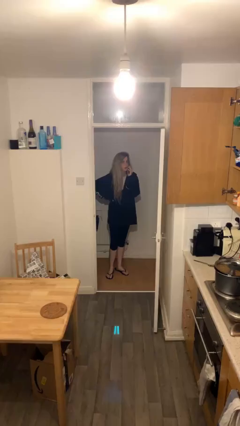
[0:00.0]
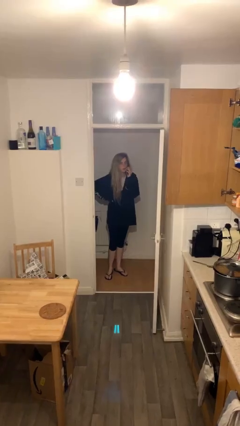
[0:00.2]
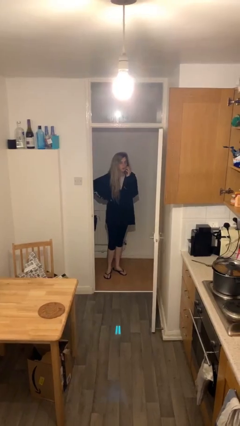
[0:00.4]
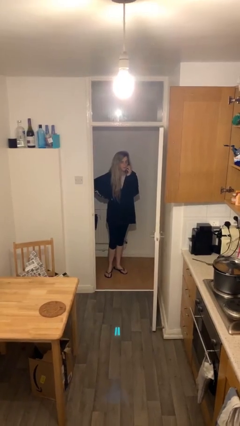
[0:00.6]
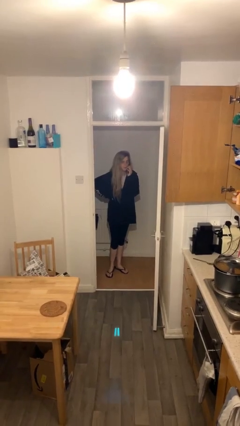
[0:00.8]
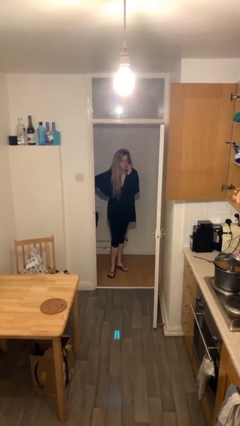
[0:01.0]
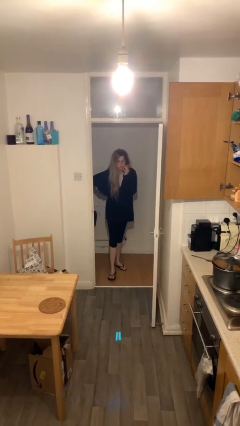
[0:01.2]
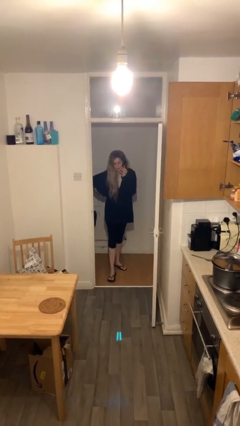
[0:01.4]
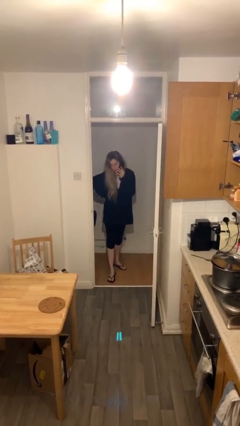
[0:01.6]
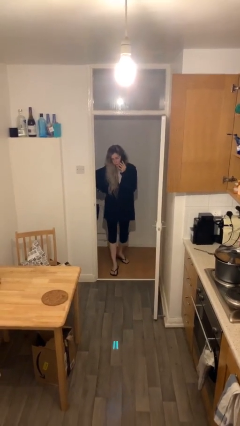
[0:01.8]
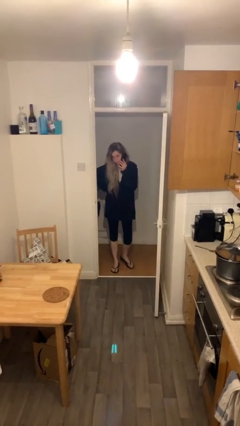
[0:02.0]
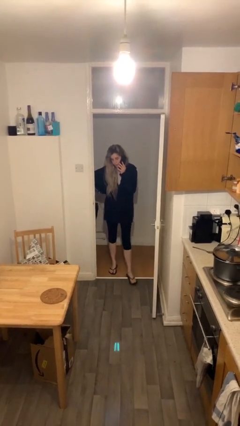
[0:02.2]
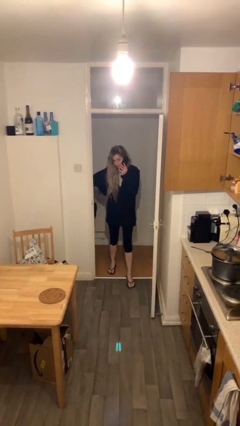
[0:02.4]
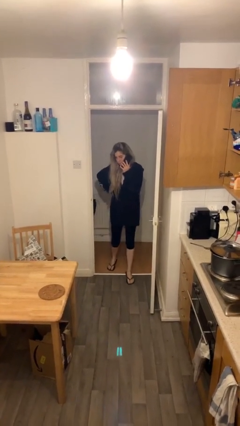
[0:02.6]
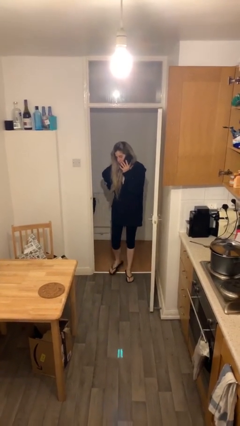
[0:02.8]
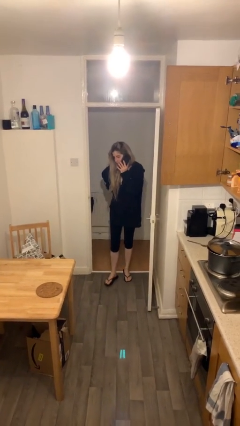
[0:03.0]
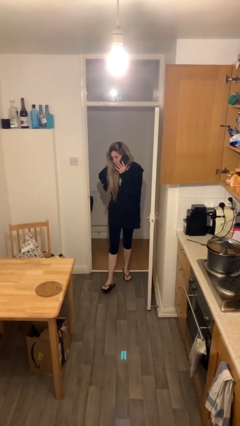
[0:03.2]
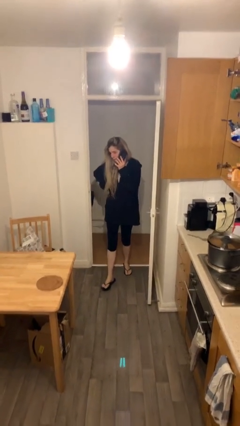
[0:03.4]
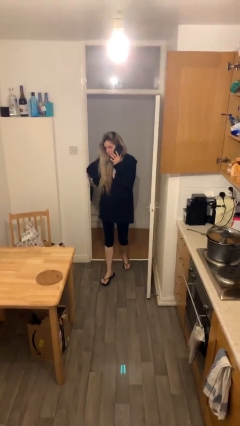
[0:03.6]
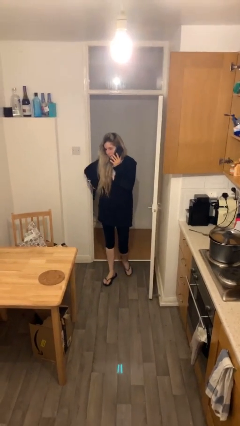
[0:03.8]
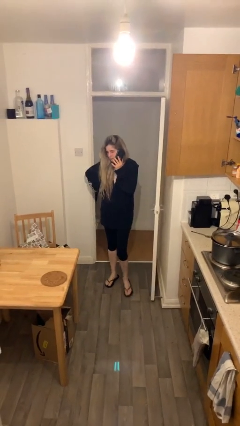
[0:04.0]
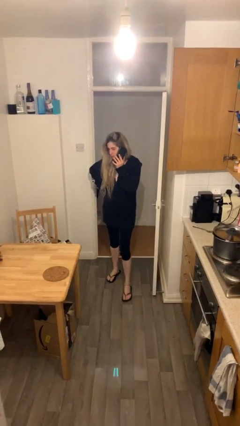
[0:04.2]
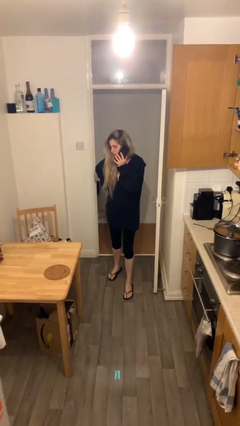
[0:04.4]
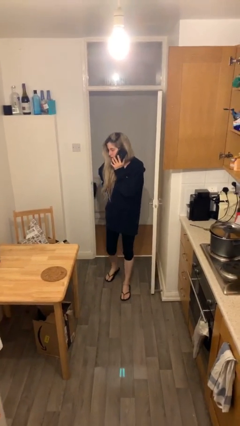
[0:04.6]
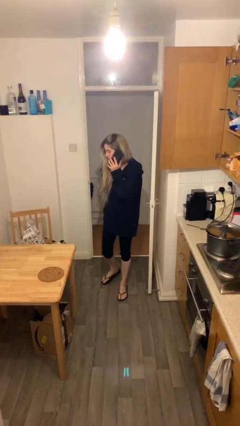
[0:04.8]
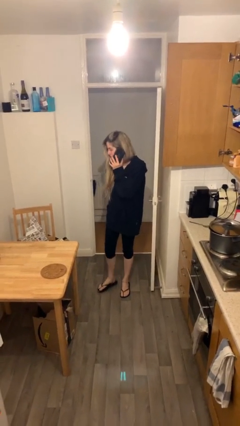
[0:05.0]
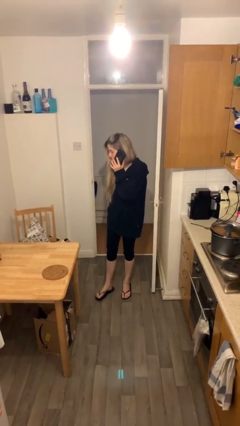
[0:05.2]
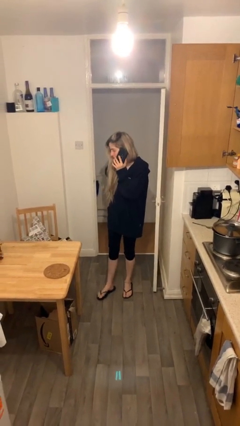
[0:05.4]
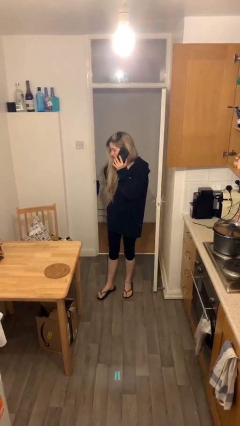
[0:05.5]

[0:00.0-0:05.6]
person enters scene through structure

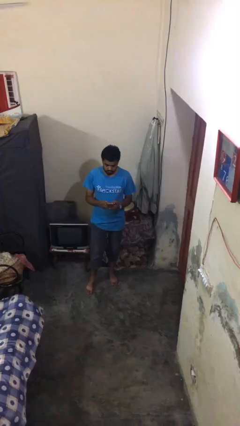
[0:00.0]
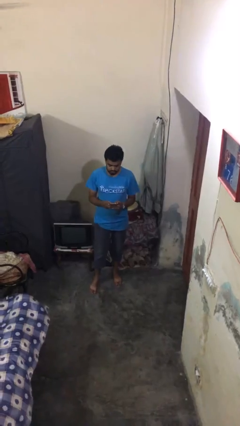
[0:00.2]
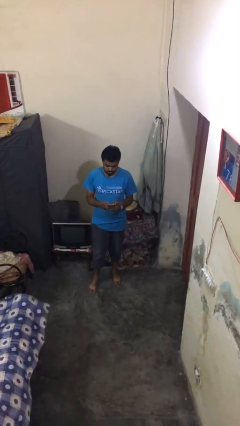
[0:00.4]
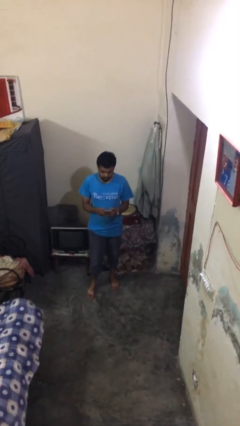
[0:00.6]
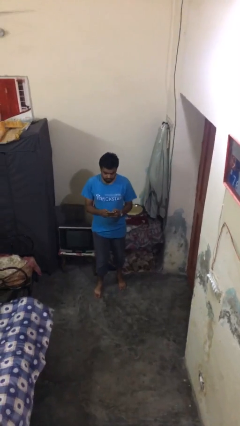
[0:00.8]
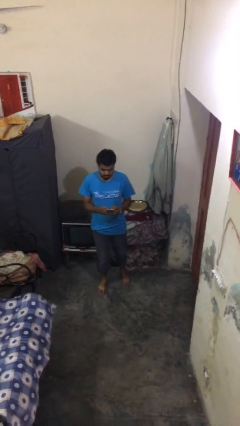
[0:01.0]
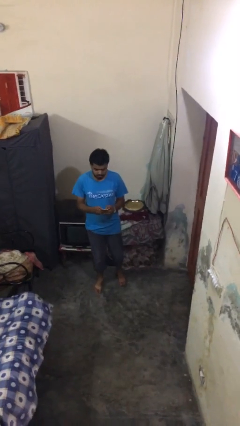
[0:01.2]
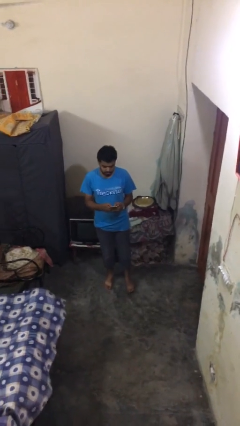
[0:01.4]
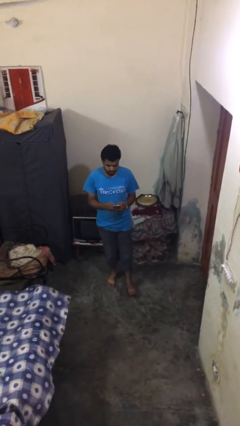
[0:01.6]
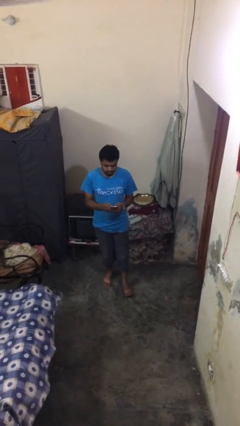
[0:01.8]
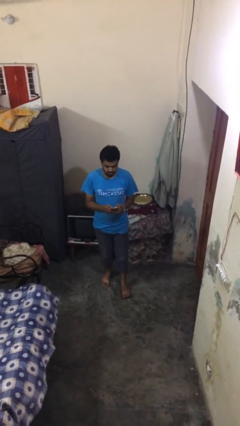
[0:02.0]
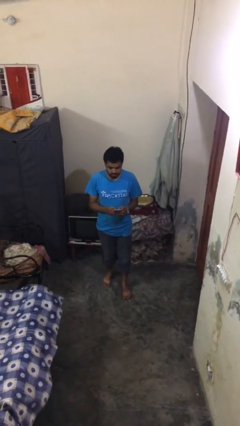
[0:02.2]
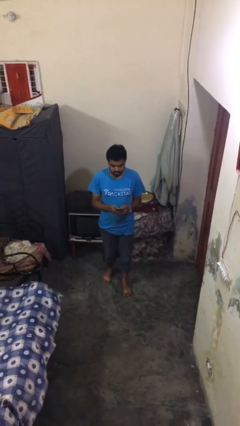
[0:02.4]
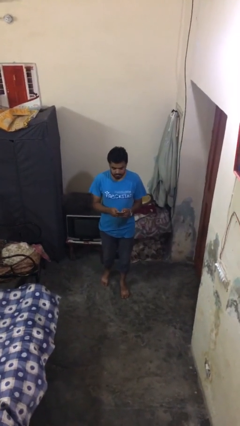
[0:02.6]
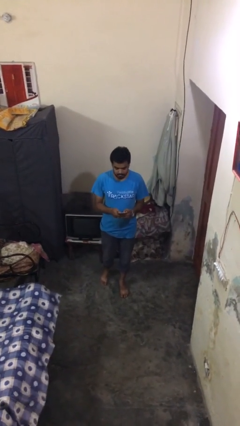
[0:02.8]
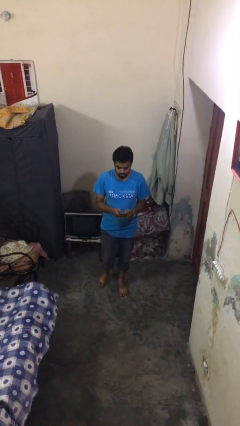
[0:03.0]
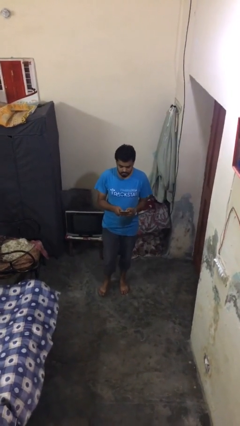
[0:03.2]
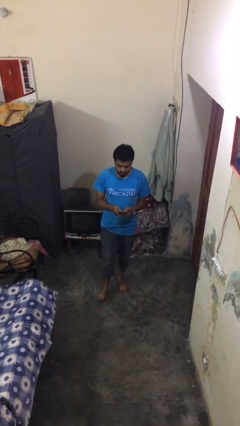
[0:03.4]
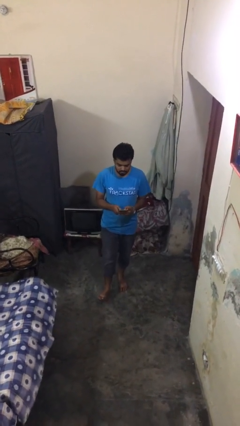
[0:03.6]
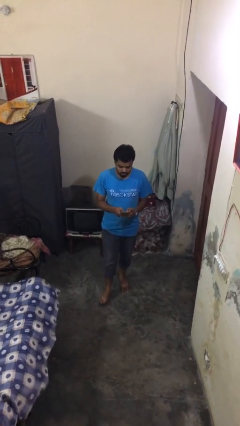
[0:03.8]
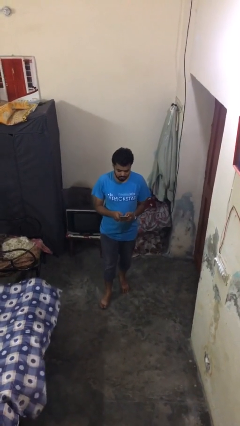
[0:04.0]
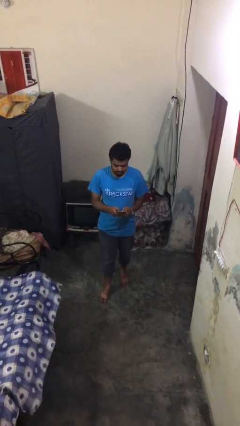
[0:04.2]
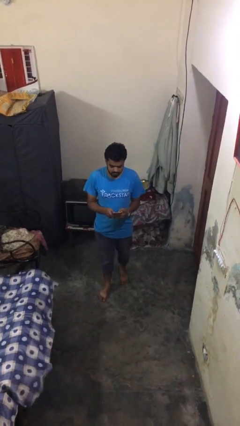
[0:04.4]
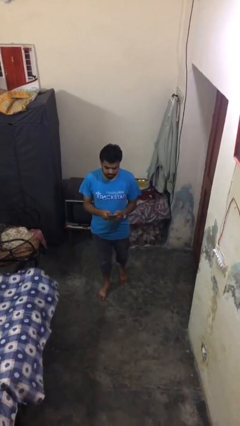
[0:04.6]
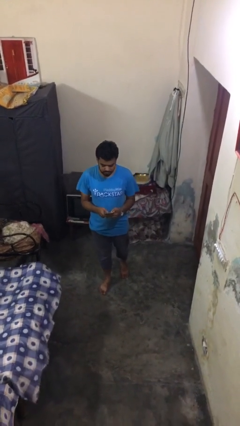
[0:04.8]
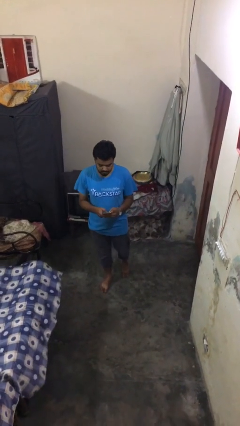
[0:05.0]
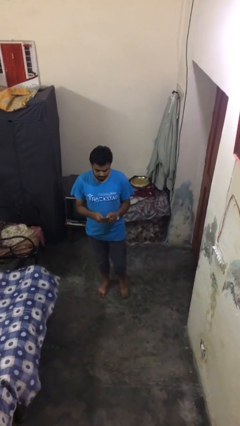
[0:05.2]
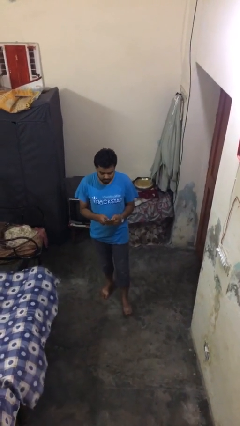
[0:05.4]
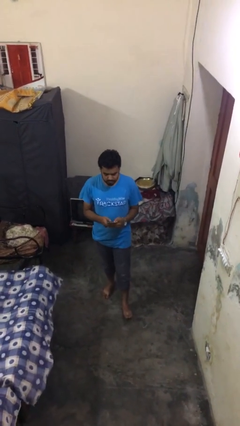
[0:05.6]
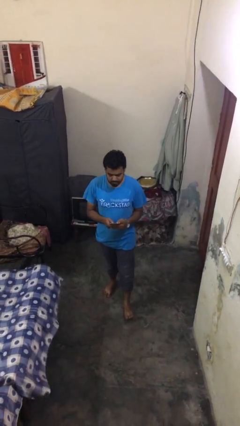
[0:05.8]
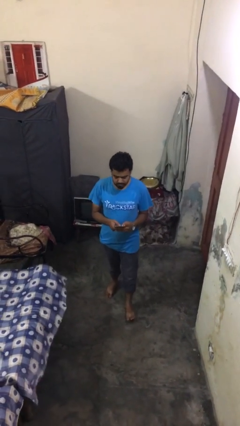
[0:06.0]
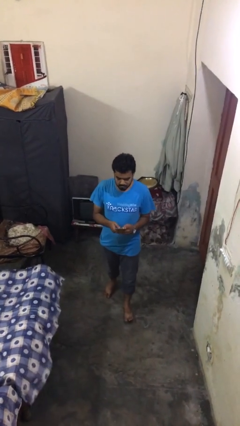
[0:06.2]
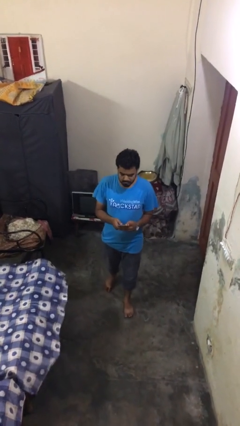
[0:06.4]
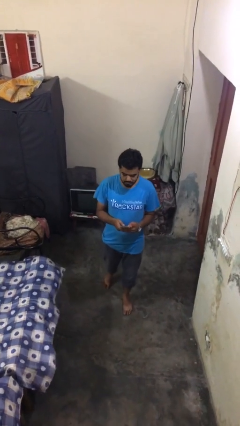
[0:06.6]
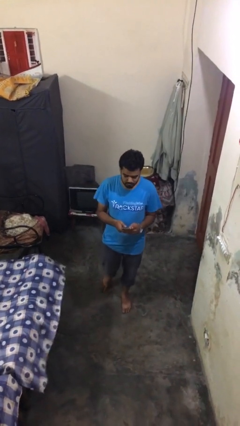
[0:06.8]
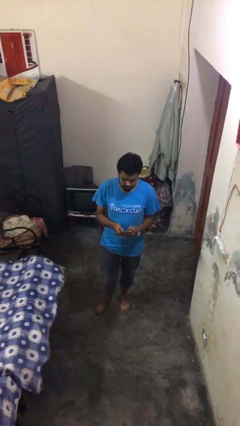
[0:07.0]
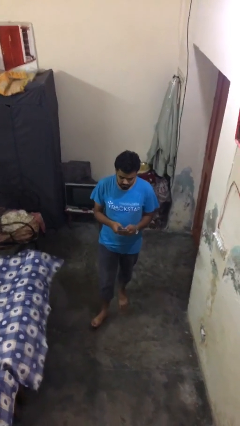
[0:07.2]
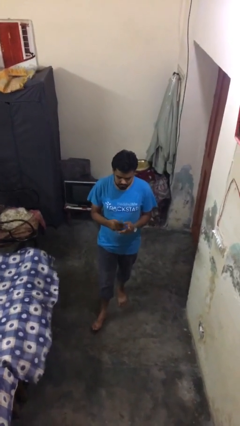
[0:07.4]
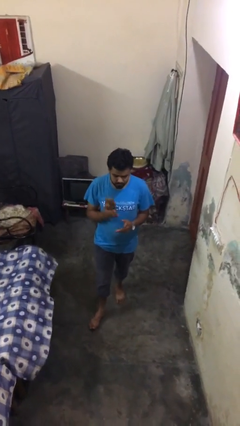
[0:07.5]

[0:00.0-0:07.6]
person texts on phone

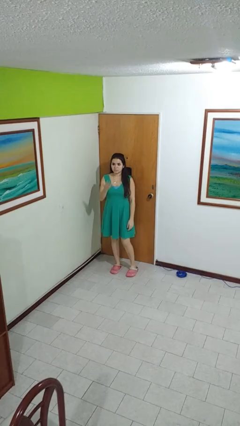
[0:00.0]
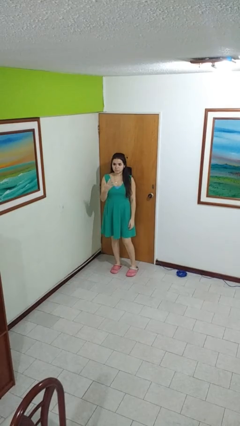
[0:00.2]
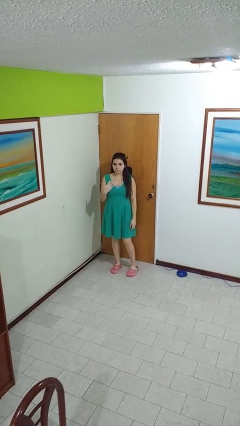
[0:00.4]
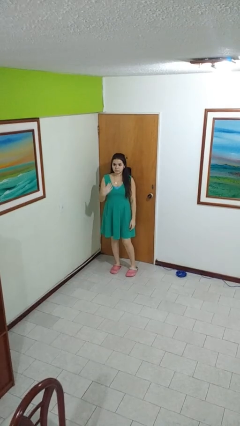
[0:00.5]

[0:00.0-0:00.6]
person gestures come here

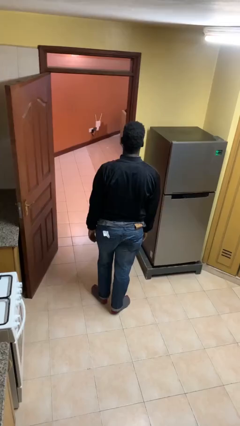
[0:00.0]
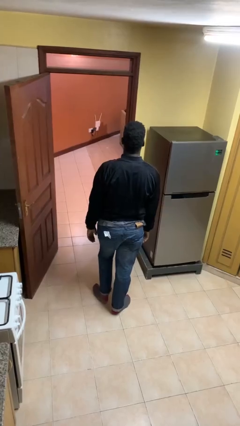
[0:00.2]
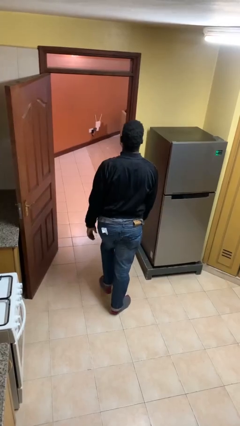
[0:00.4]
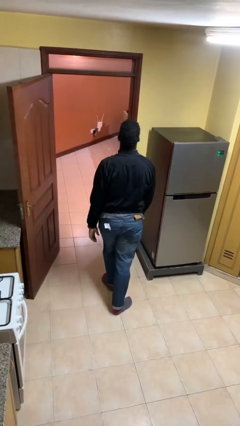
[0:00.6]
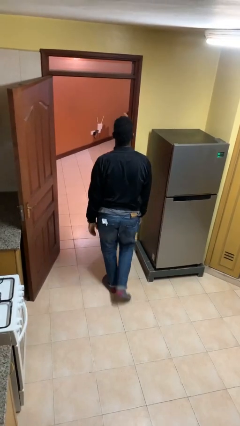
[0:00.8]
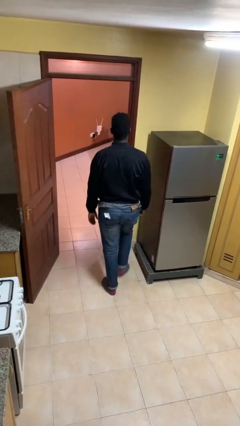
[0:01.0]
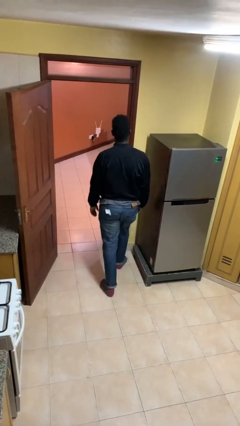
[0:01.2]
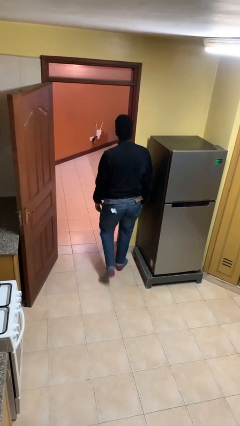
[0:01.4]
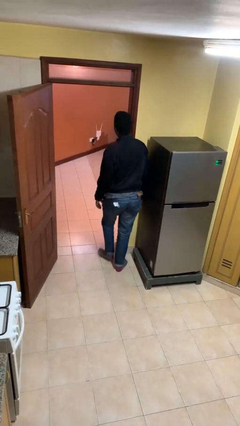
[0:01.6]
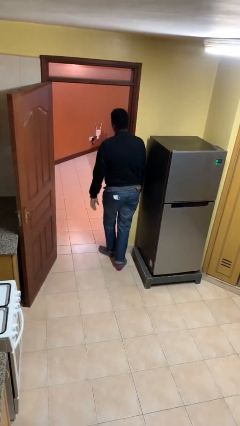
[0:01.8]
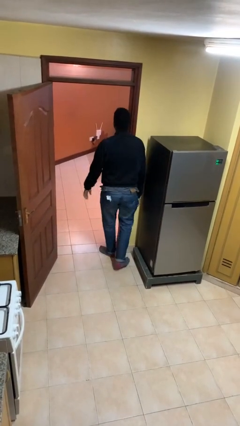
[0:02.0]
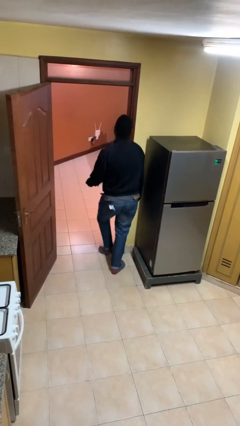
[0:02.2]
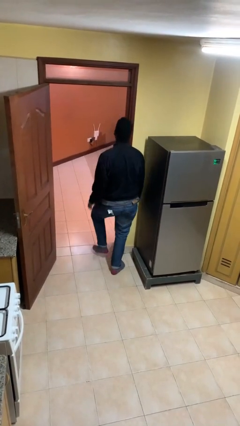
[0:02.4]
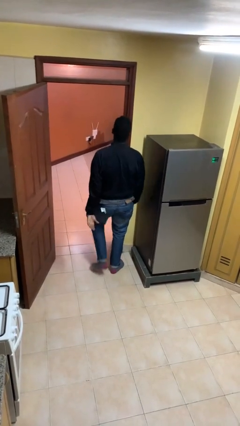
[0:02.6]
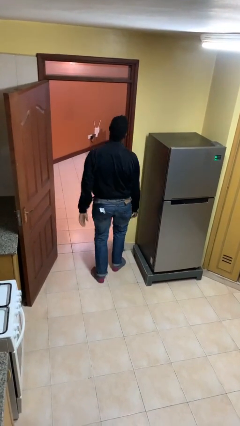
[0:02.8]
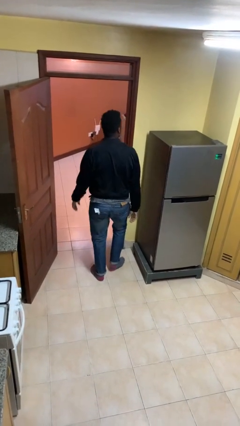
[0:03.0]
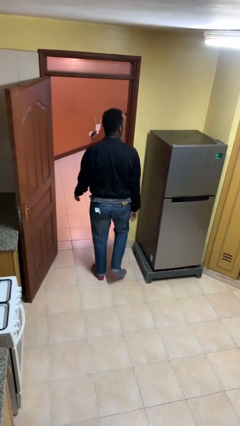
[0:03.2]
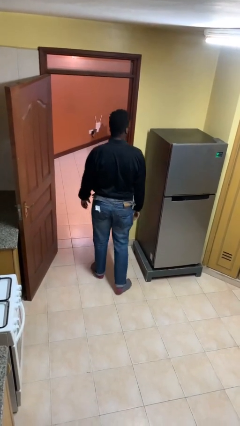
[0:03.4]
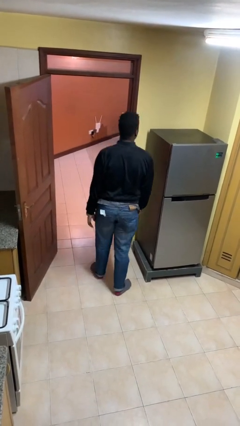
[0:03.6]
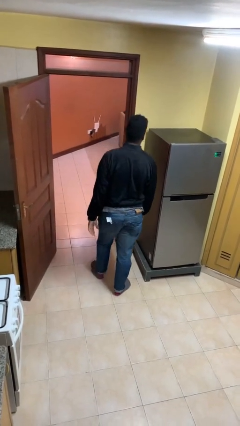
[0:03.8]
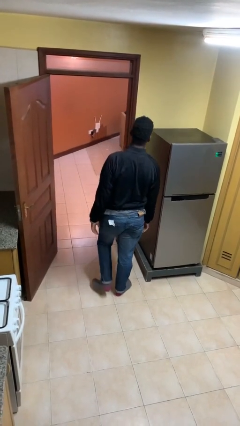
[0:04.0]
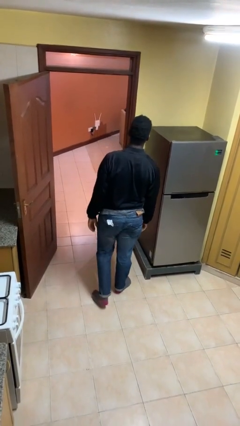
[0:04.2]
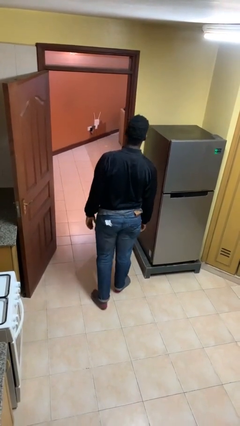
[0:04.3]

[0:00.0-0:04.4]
person bumps into wall
